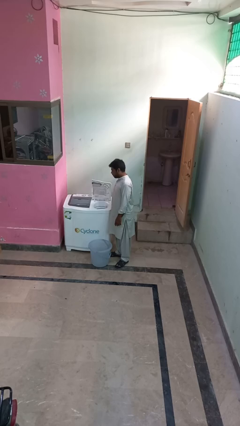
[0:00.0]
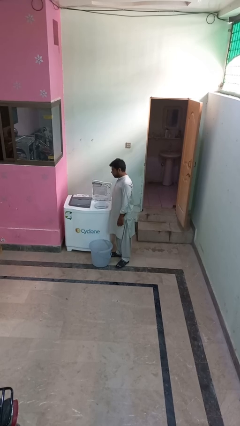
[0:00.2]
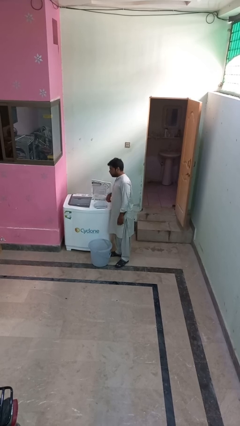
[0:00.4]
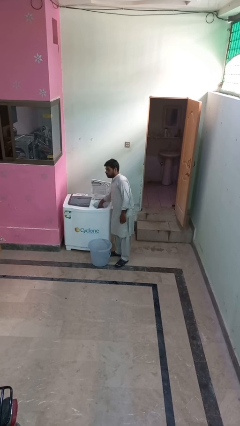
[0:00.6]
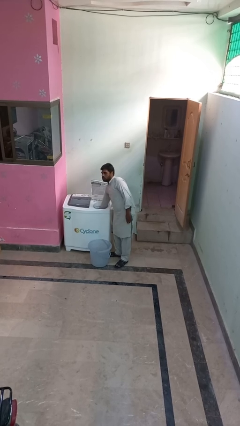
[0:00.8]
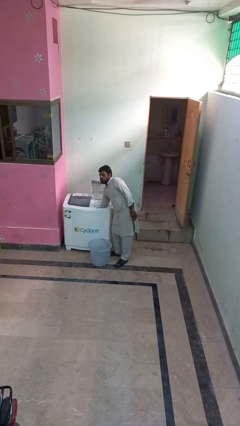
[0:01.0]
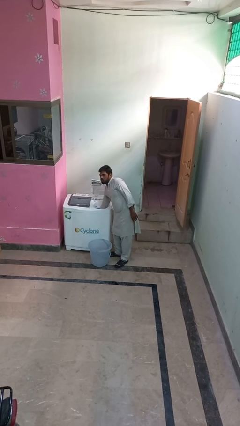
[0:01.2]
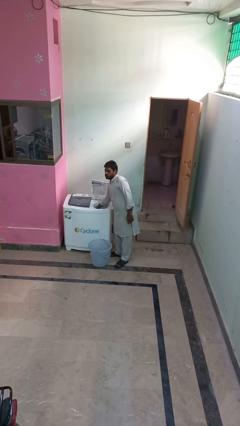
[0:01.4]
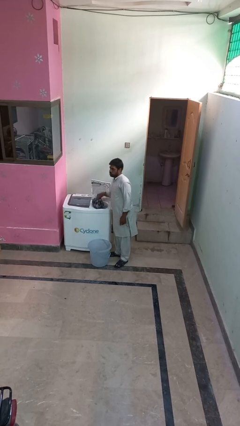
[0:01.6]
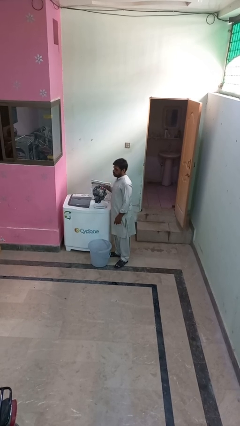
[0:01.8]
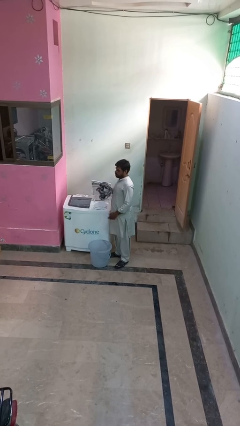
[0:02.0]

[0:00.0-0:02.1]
person unloads dryer

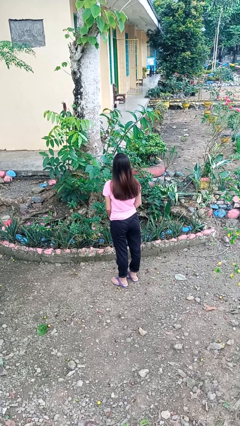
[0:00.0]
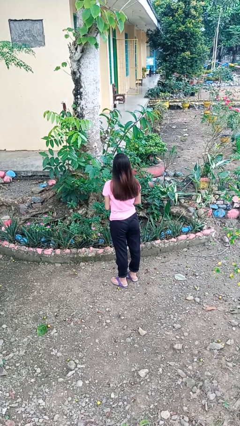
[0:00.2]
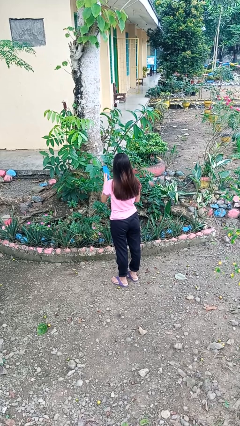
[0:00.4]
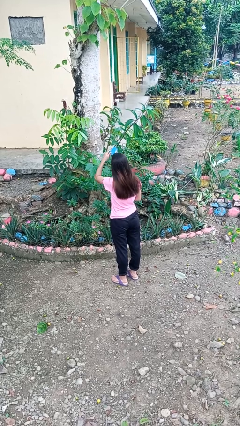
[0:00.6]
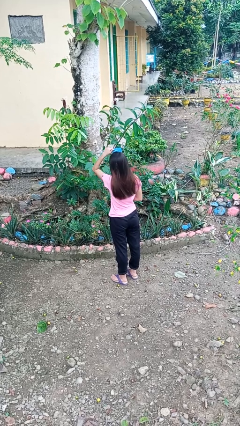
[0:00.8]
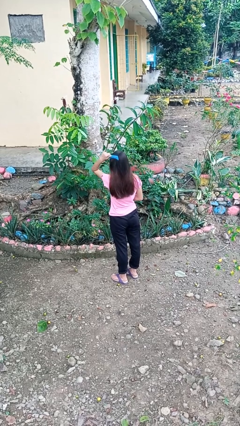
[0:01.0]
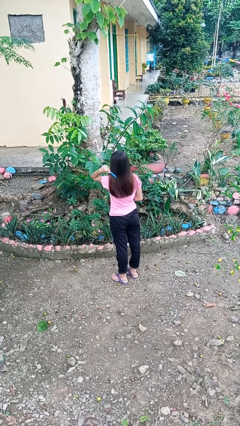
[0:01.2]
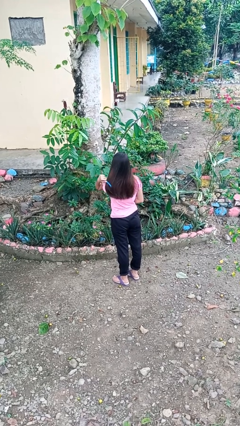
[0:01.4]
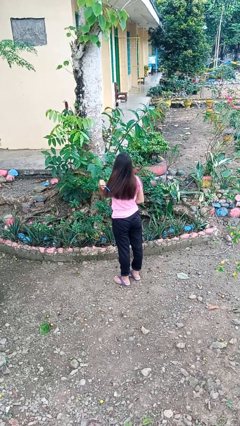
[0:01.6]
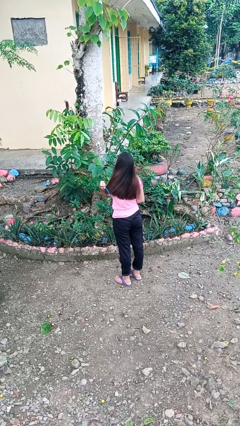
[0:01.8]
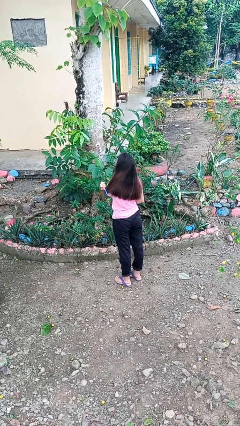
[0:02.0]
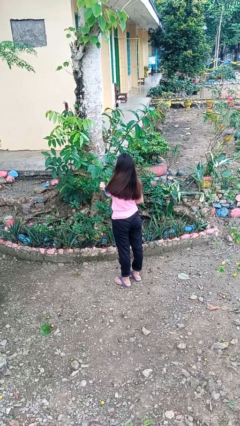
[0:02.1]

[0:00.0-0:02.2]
person brushes hair

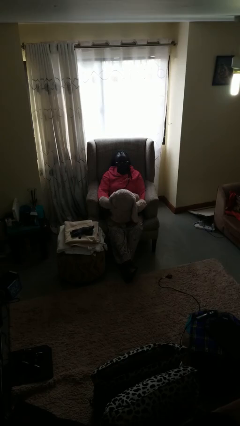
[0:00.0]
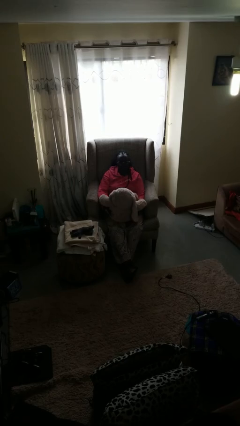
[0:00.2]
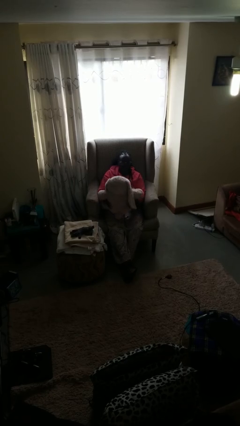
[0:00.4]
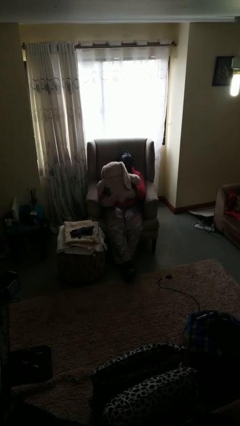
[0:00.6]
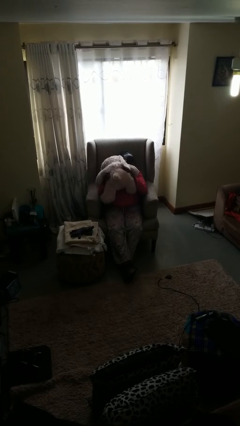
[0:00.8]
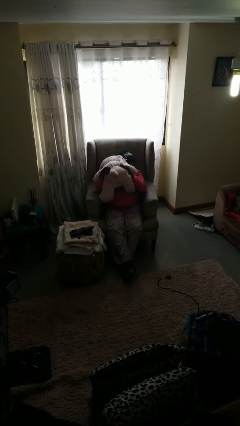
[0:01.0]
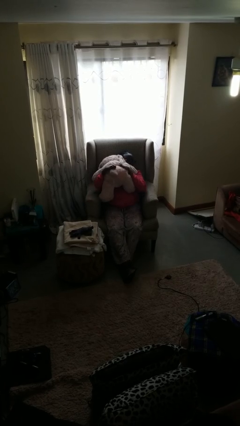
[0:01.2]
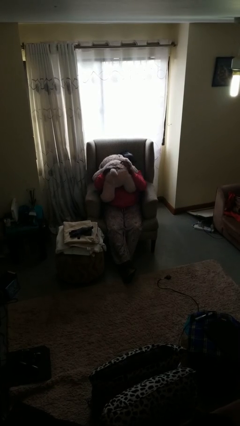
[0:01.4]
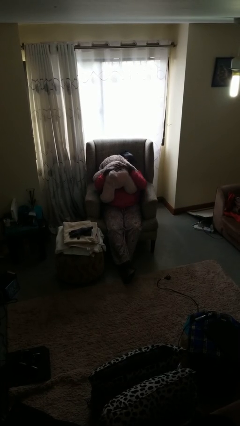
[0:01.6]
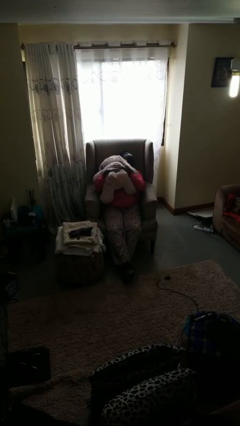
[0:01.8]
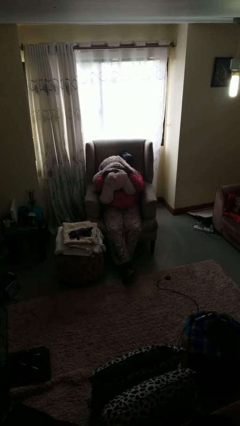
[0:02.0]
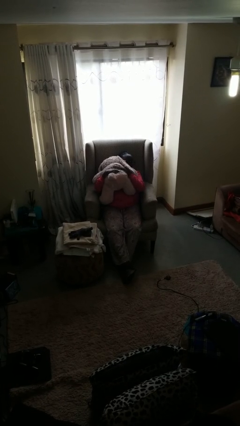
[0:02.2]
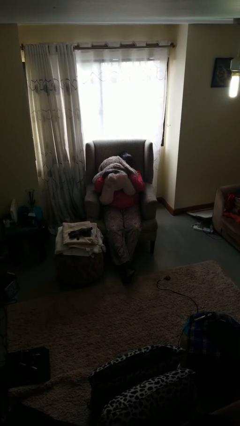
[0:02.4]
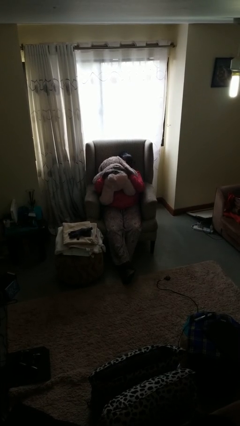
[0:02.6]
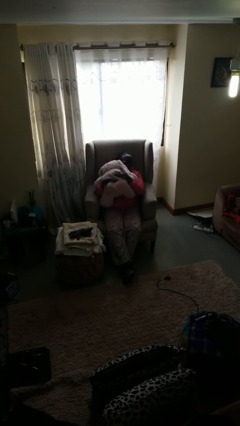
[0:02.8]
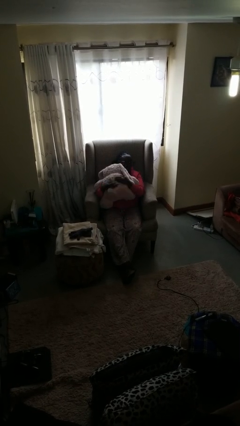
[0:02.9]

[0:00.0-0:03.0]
person hugs stuffed animal

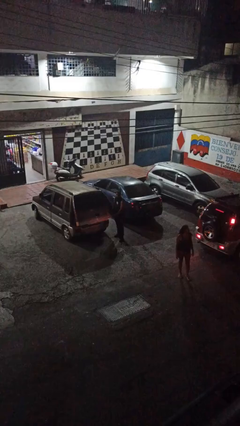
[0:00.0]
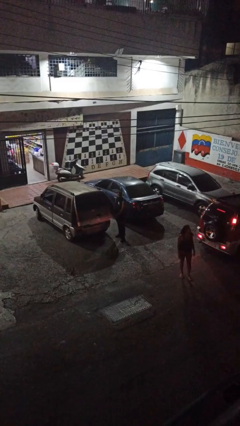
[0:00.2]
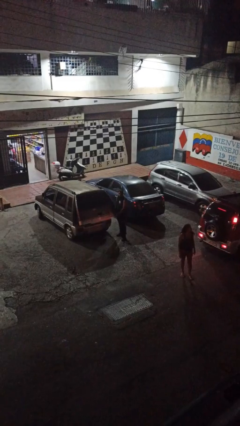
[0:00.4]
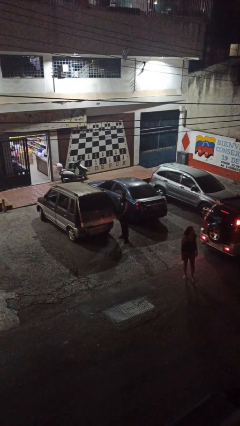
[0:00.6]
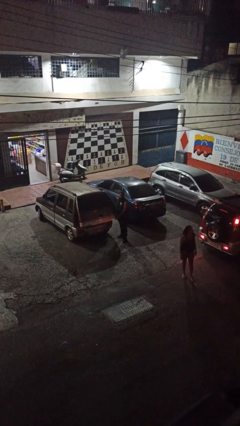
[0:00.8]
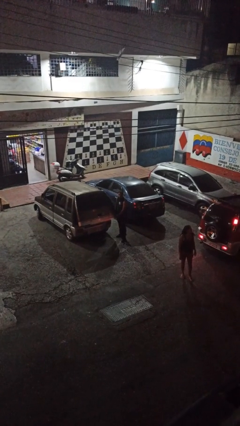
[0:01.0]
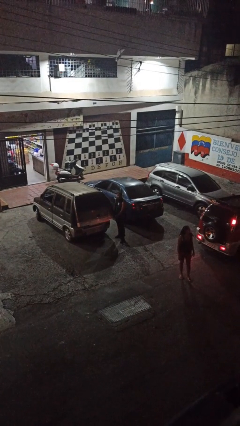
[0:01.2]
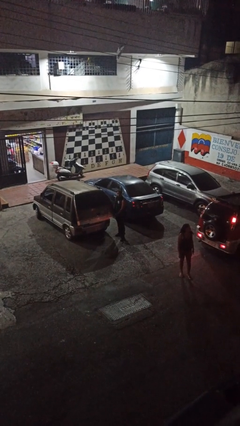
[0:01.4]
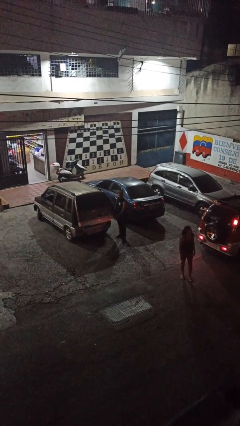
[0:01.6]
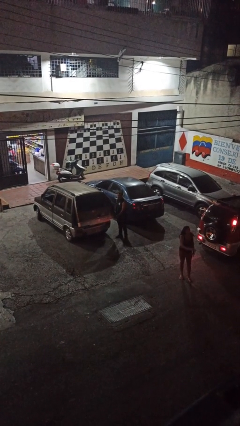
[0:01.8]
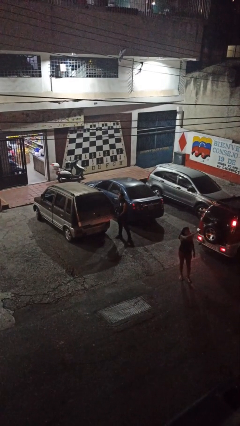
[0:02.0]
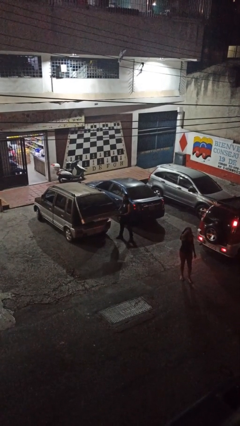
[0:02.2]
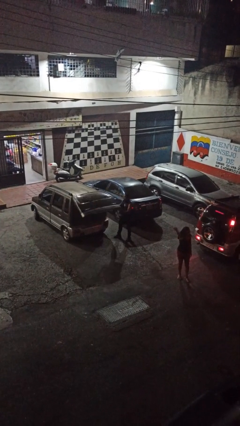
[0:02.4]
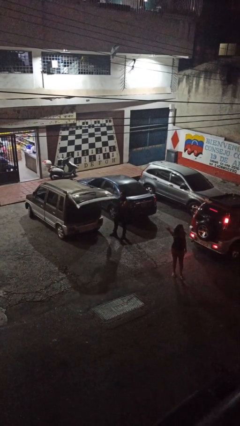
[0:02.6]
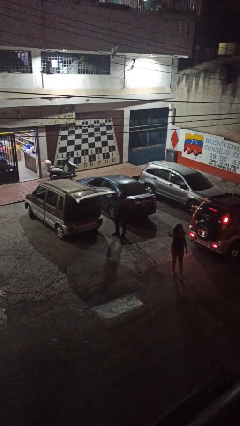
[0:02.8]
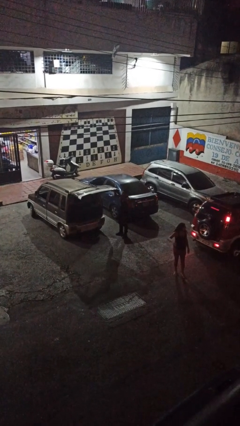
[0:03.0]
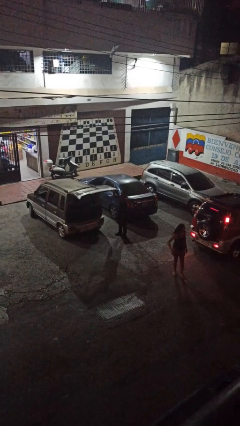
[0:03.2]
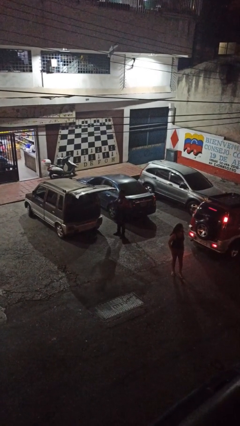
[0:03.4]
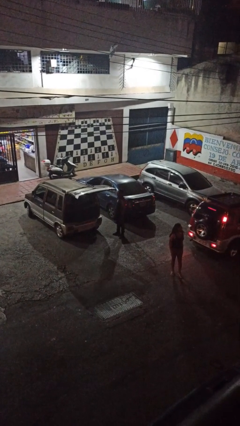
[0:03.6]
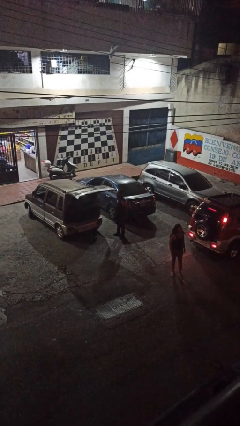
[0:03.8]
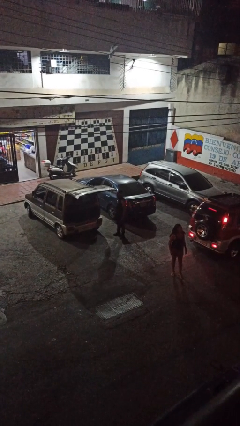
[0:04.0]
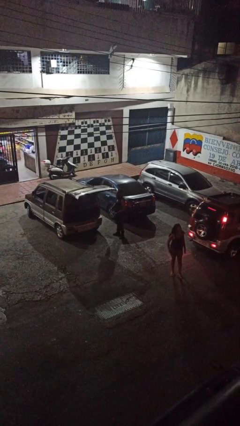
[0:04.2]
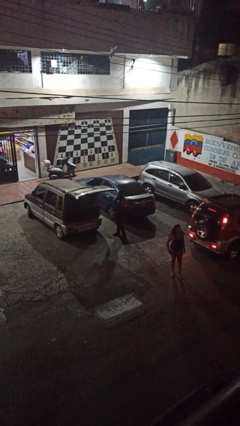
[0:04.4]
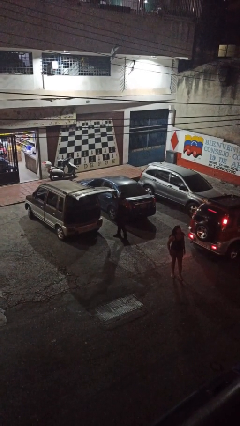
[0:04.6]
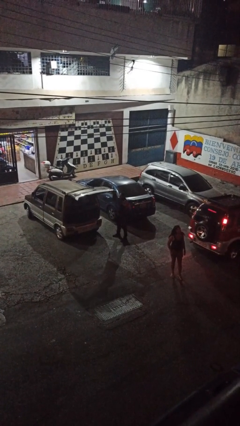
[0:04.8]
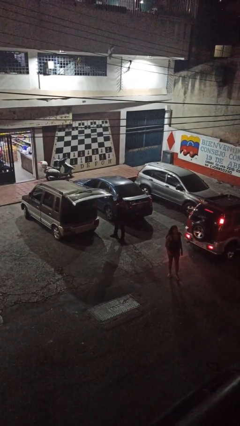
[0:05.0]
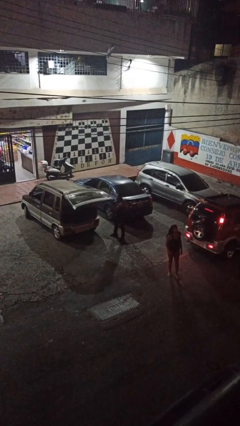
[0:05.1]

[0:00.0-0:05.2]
person opens car trunk

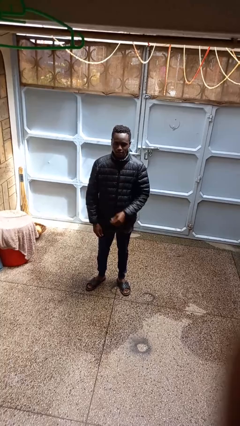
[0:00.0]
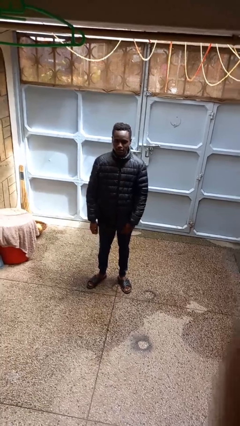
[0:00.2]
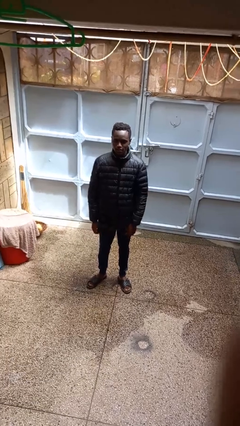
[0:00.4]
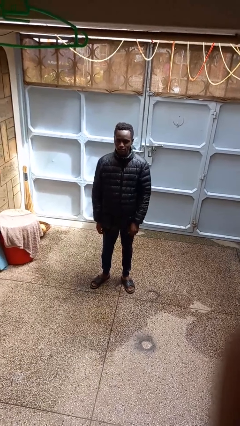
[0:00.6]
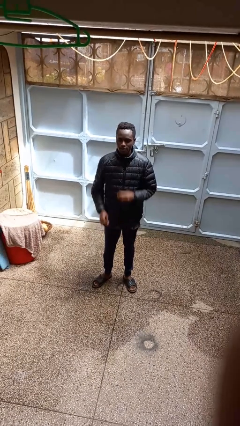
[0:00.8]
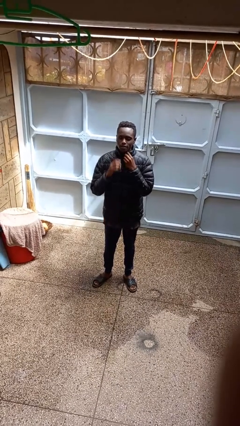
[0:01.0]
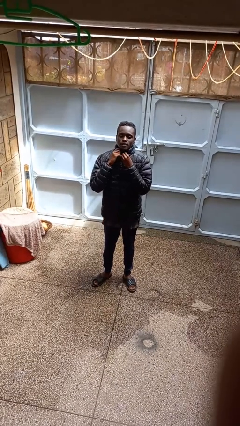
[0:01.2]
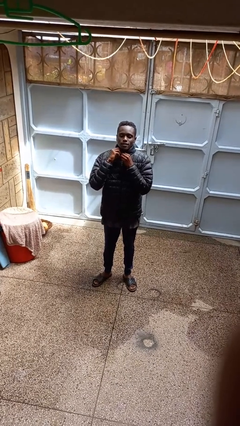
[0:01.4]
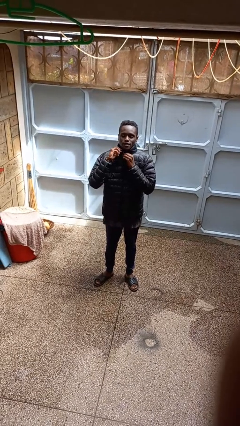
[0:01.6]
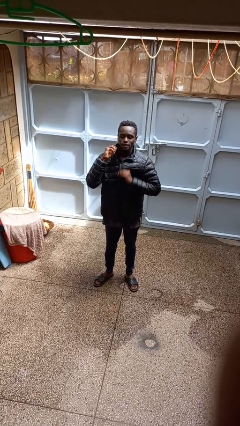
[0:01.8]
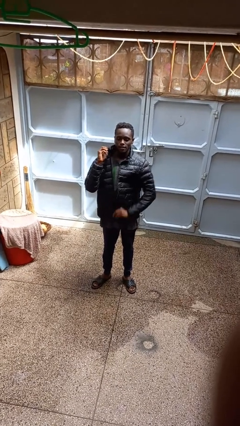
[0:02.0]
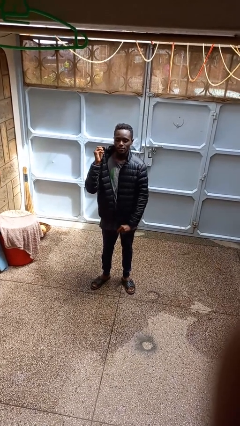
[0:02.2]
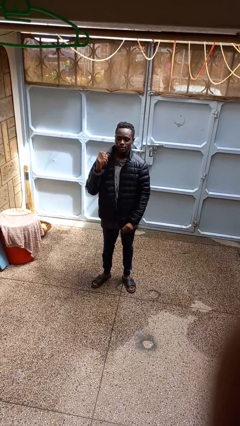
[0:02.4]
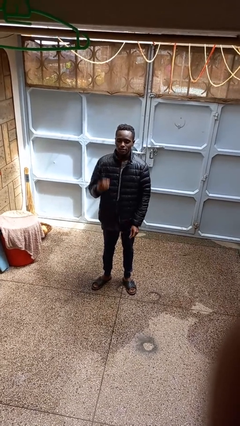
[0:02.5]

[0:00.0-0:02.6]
person unzips jacket

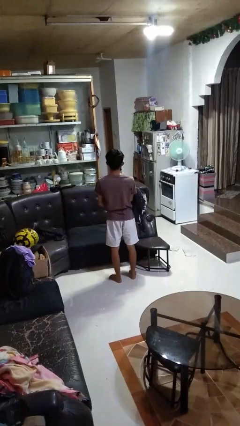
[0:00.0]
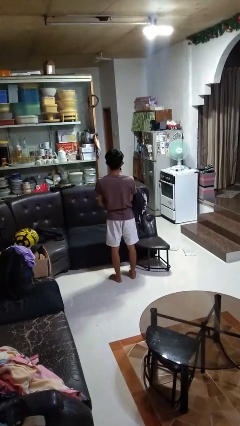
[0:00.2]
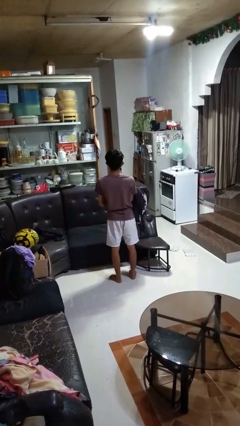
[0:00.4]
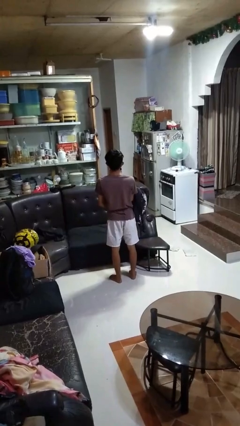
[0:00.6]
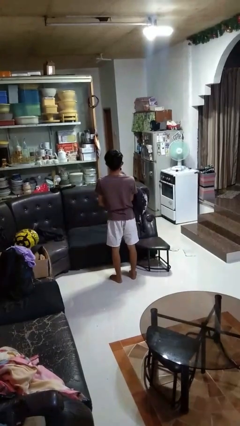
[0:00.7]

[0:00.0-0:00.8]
person takes off backpack

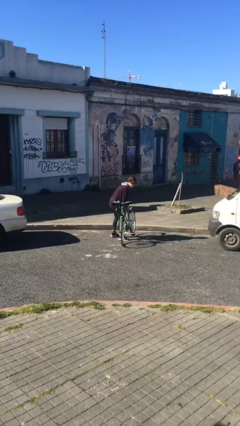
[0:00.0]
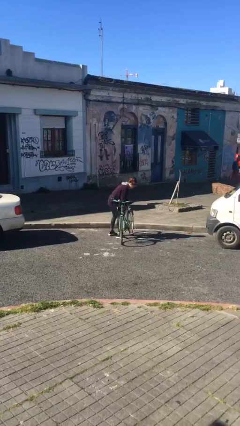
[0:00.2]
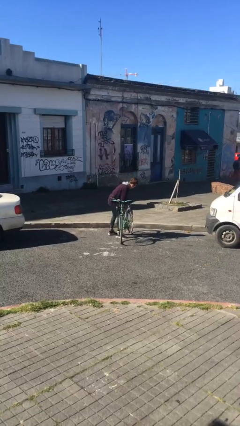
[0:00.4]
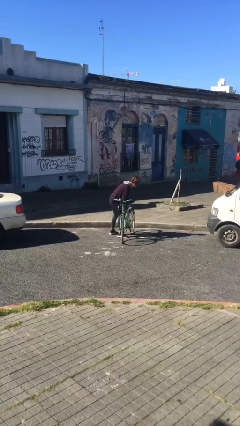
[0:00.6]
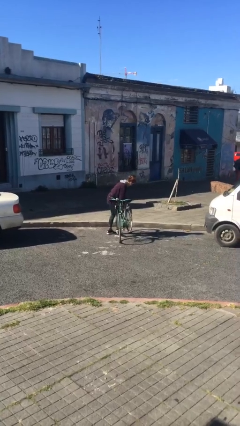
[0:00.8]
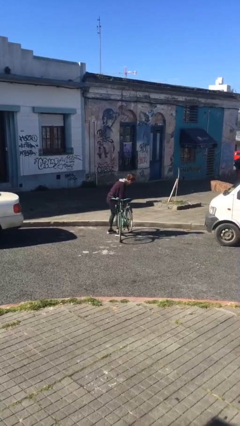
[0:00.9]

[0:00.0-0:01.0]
person puts down object on floor
